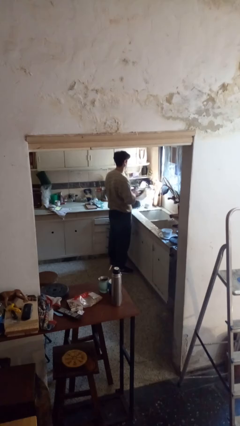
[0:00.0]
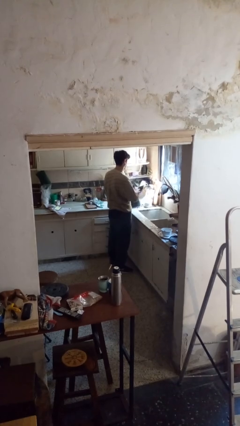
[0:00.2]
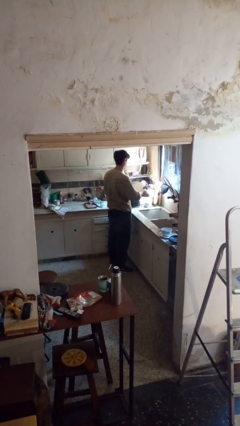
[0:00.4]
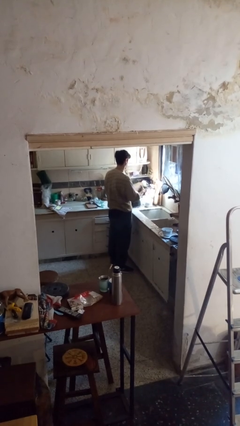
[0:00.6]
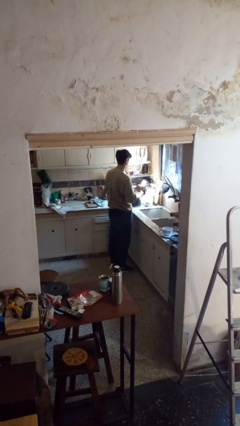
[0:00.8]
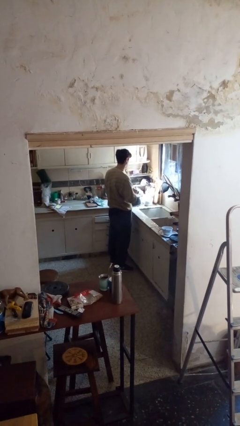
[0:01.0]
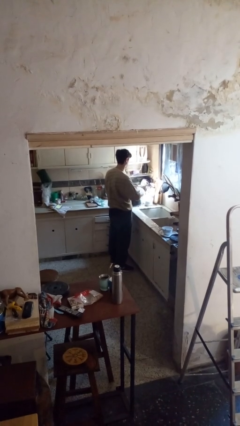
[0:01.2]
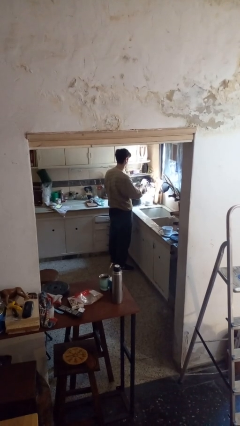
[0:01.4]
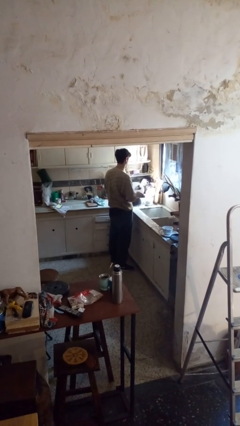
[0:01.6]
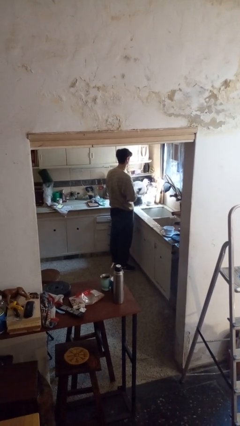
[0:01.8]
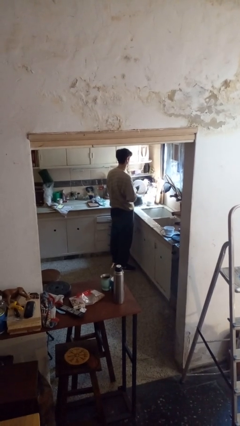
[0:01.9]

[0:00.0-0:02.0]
person dries dish

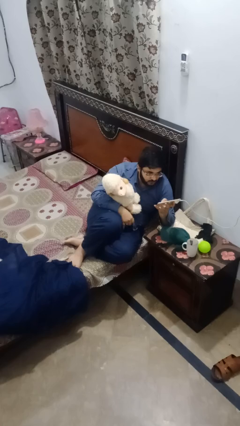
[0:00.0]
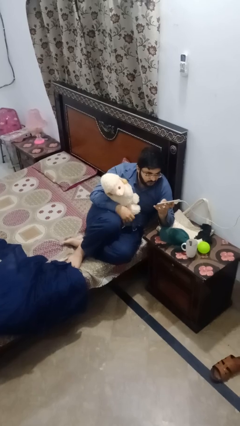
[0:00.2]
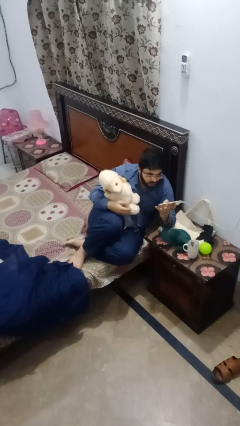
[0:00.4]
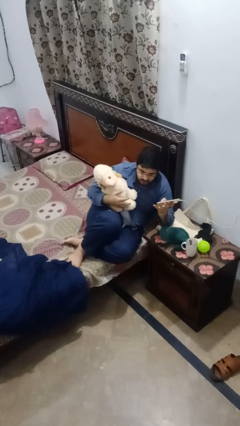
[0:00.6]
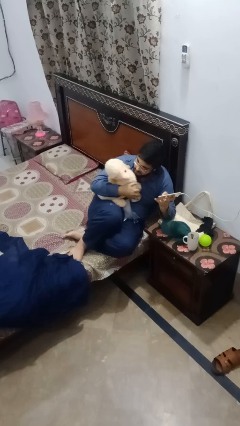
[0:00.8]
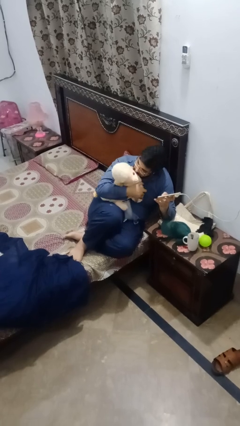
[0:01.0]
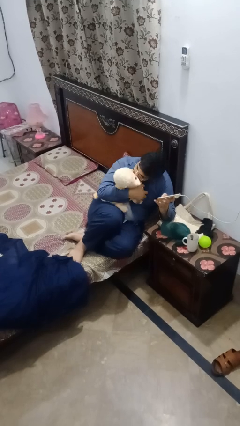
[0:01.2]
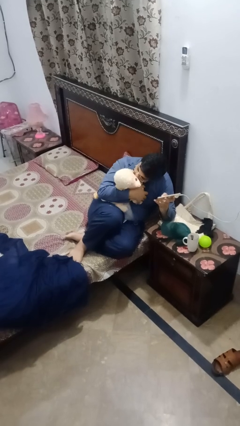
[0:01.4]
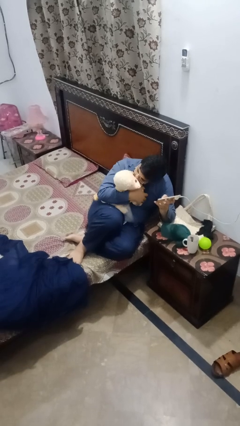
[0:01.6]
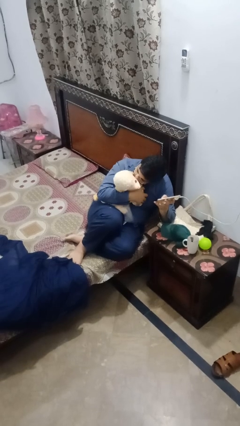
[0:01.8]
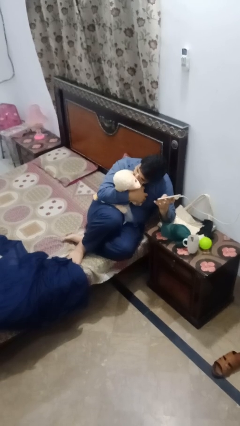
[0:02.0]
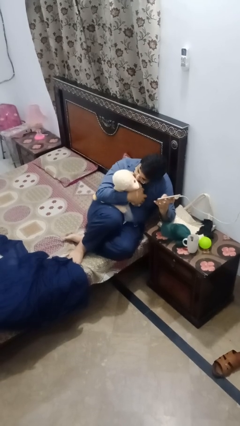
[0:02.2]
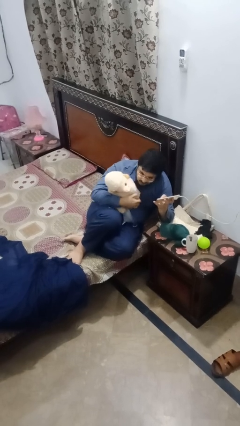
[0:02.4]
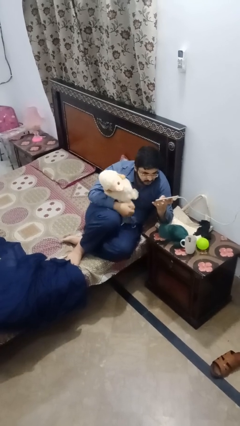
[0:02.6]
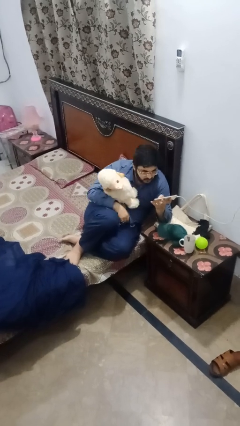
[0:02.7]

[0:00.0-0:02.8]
person hugs stuffed animal

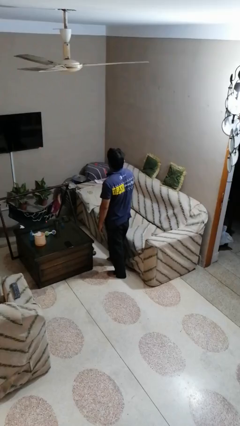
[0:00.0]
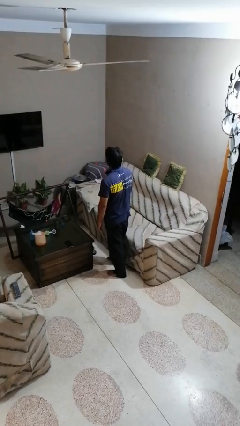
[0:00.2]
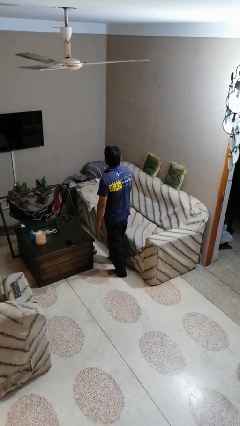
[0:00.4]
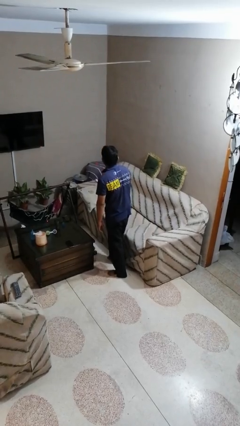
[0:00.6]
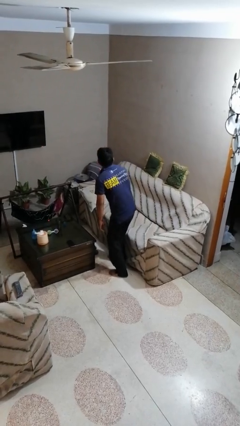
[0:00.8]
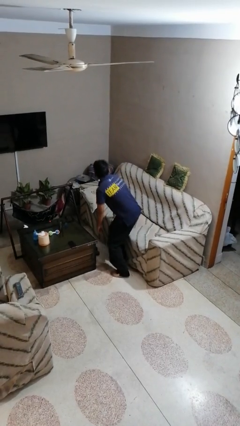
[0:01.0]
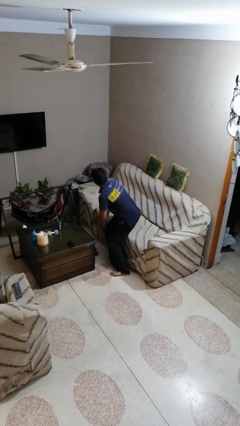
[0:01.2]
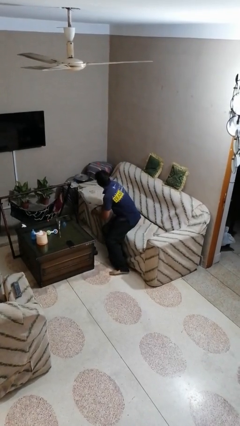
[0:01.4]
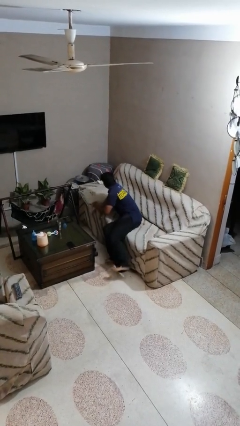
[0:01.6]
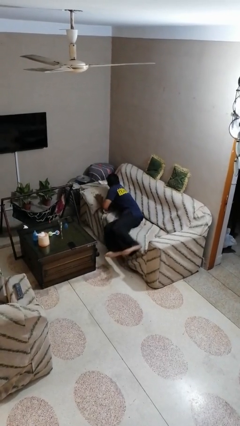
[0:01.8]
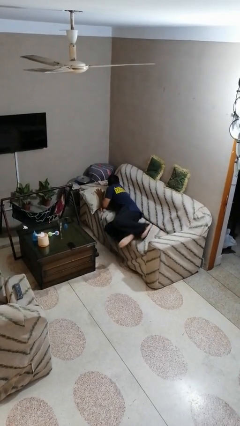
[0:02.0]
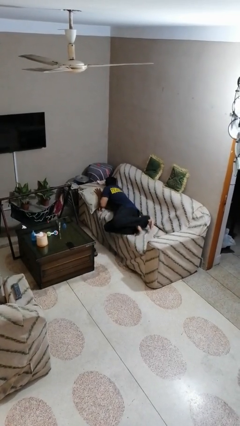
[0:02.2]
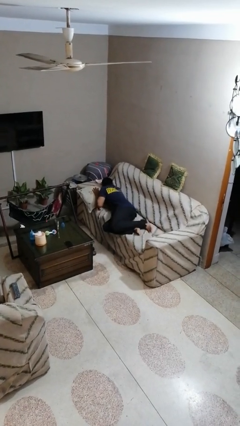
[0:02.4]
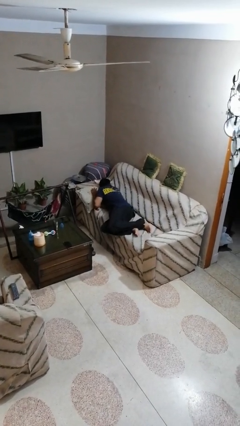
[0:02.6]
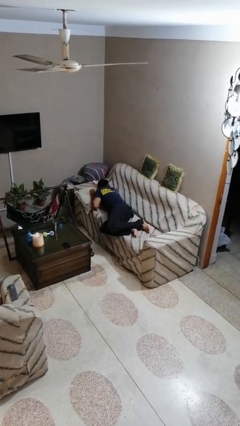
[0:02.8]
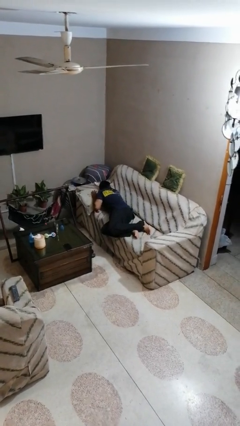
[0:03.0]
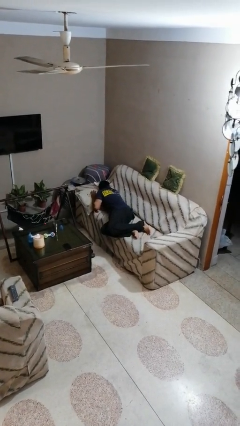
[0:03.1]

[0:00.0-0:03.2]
person lies down on couch

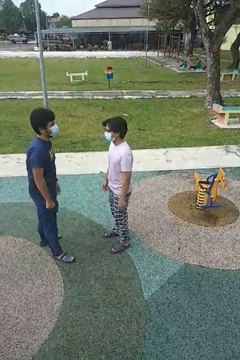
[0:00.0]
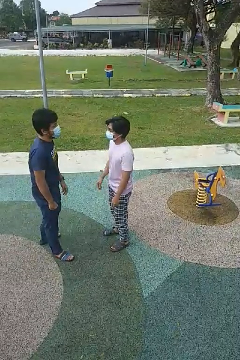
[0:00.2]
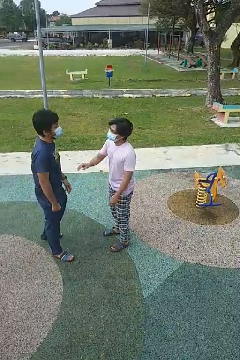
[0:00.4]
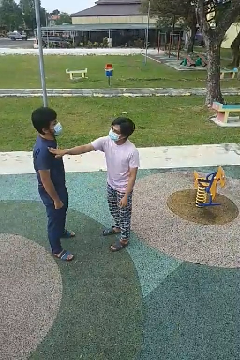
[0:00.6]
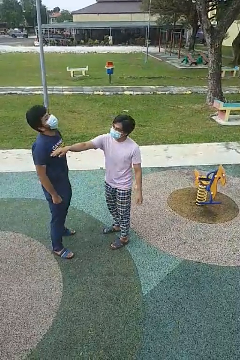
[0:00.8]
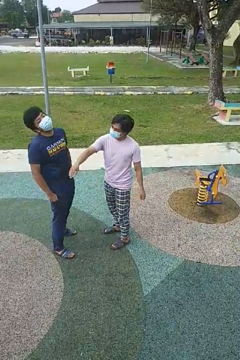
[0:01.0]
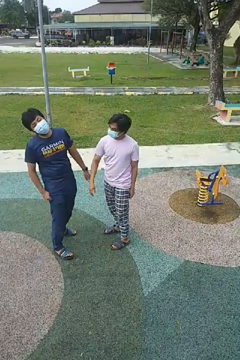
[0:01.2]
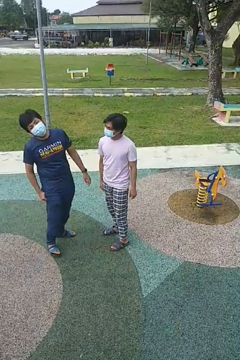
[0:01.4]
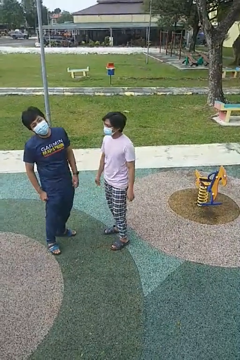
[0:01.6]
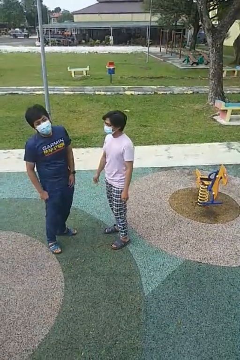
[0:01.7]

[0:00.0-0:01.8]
person shoves person

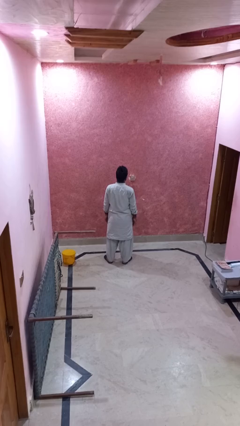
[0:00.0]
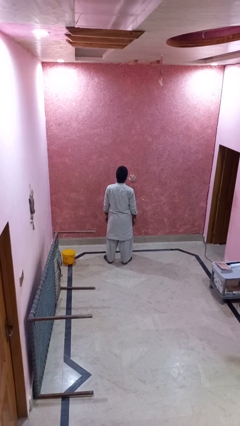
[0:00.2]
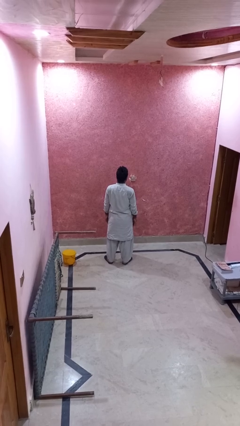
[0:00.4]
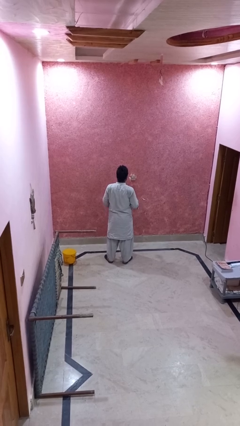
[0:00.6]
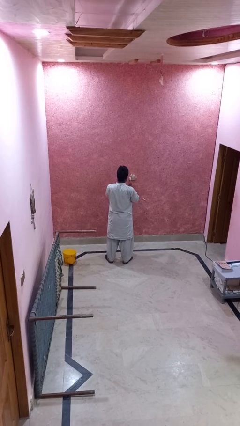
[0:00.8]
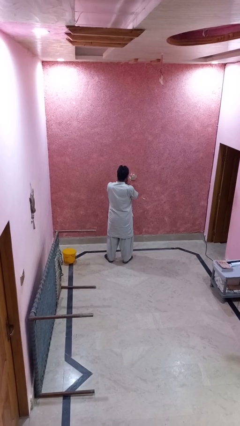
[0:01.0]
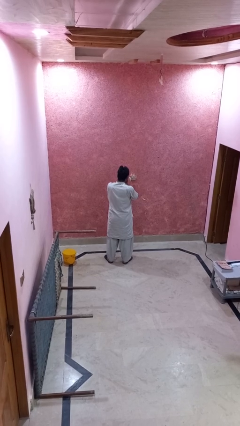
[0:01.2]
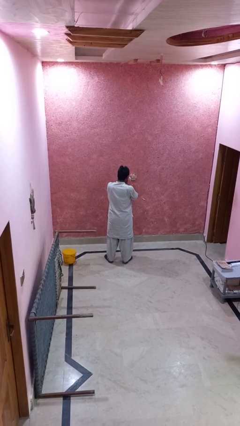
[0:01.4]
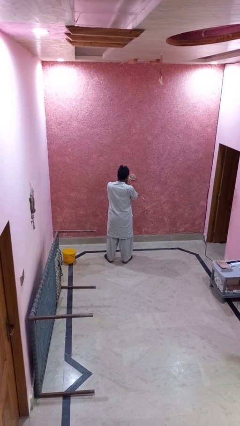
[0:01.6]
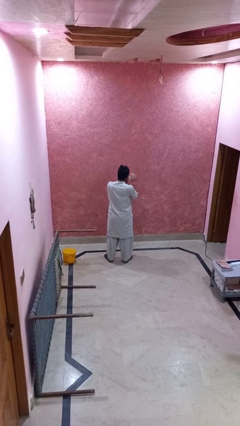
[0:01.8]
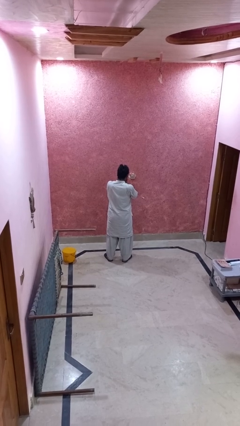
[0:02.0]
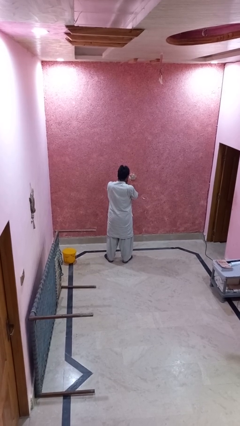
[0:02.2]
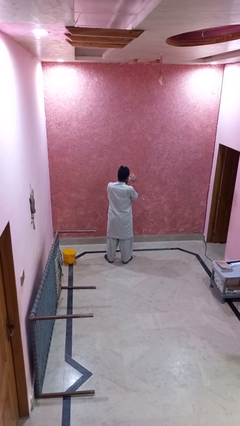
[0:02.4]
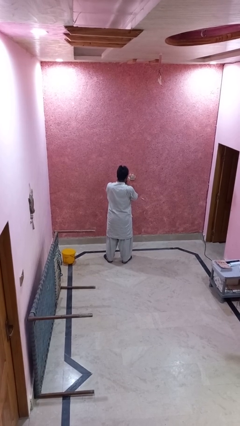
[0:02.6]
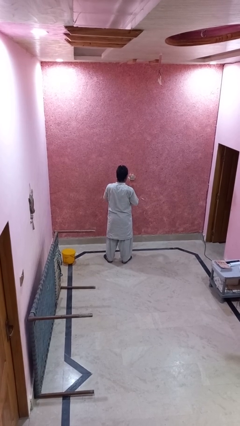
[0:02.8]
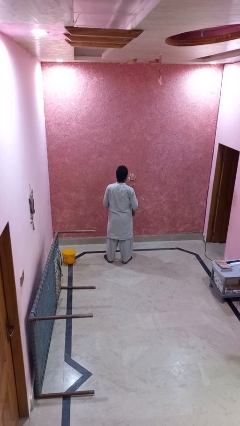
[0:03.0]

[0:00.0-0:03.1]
person sneezes into hand

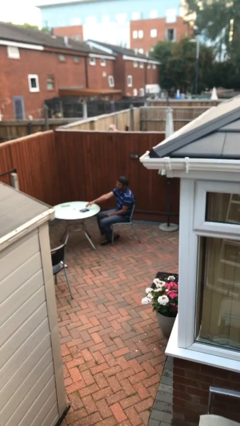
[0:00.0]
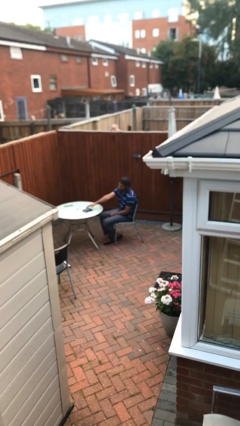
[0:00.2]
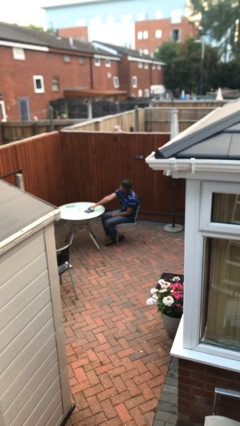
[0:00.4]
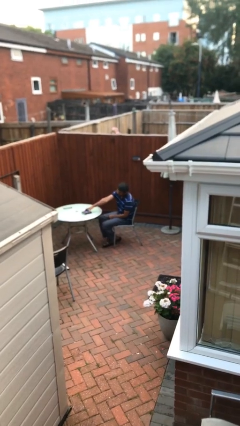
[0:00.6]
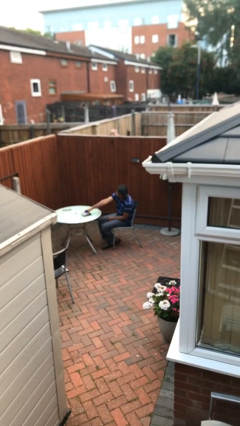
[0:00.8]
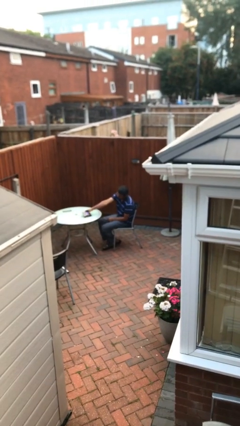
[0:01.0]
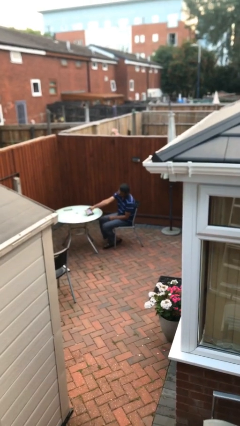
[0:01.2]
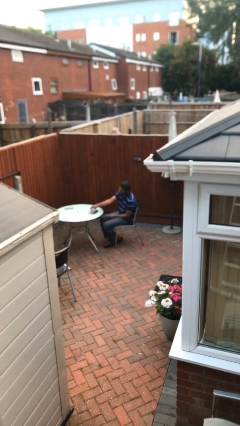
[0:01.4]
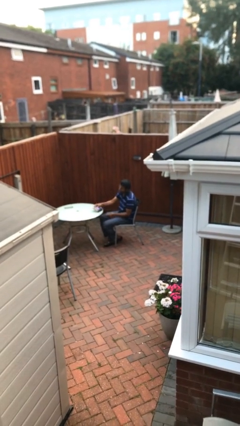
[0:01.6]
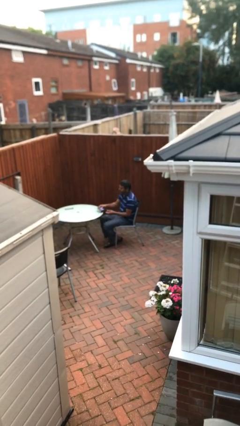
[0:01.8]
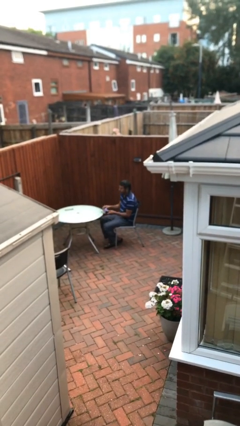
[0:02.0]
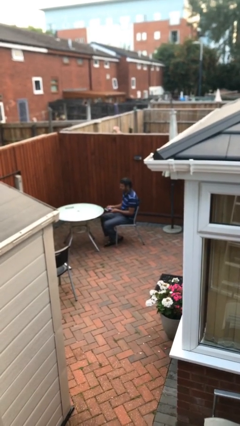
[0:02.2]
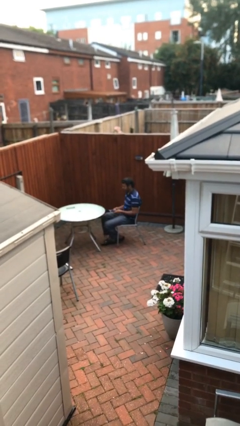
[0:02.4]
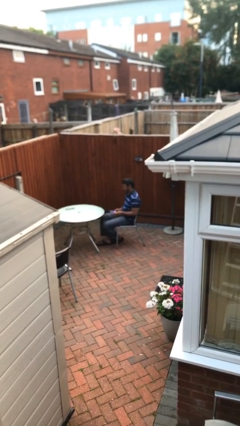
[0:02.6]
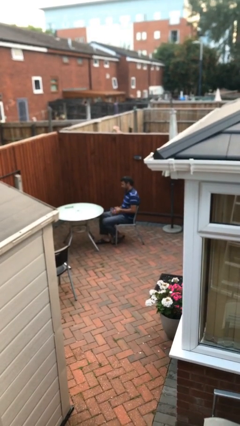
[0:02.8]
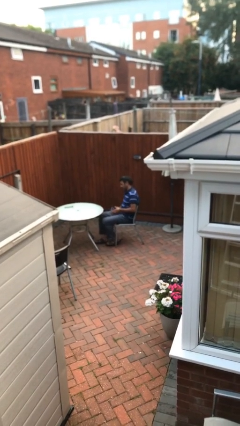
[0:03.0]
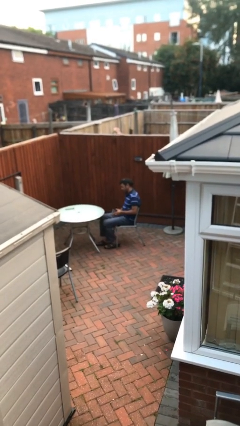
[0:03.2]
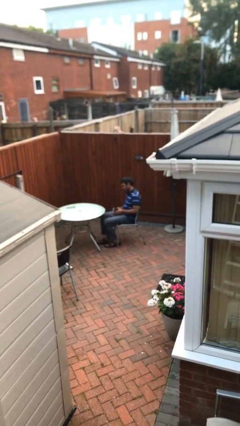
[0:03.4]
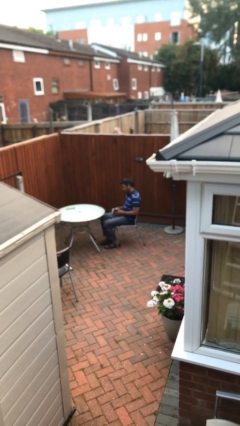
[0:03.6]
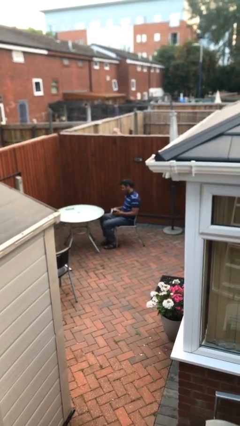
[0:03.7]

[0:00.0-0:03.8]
person picks up object from table

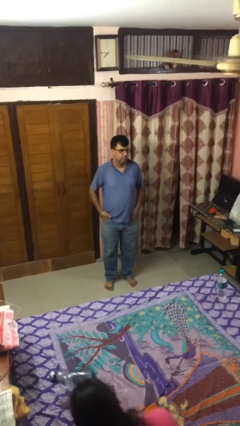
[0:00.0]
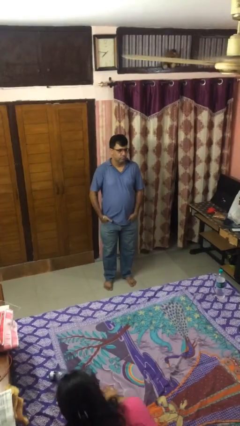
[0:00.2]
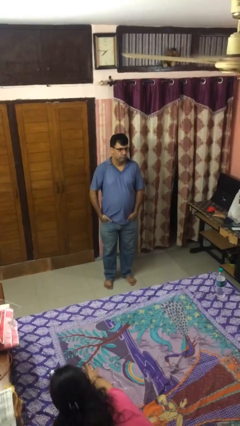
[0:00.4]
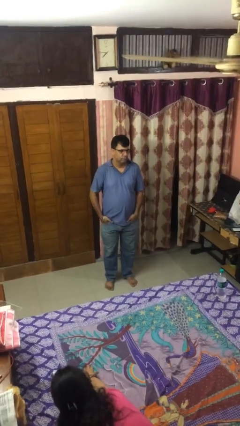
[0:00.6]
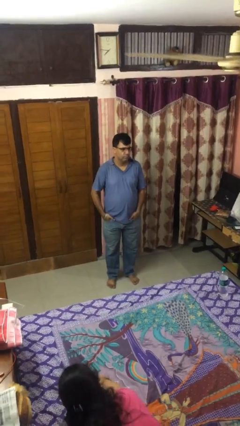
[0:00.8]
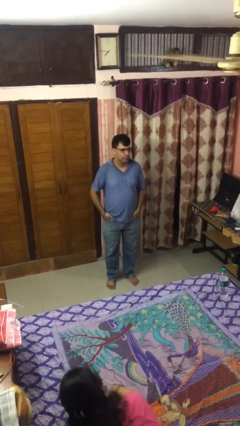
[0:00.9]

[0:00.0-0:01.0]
person puts hands in back pockets
